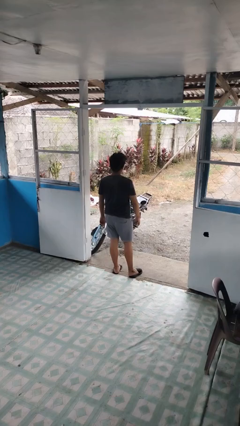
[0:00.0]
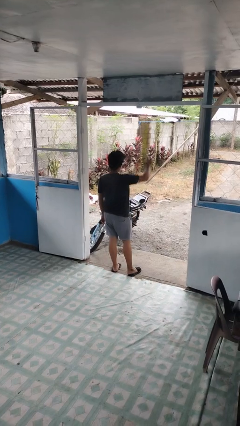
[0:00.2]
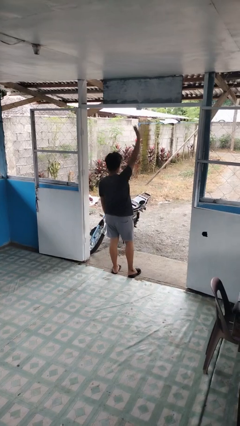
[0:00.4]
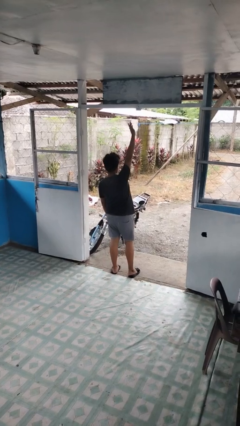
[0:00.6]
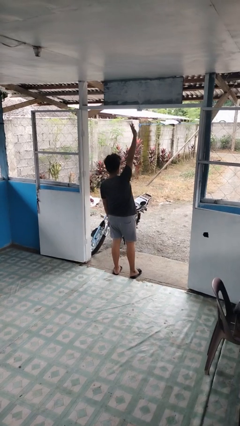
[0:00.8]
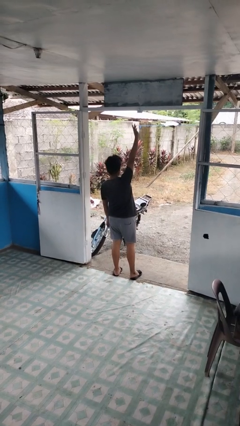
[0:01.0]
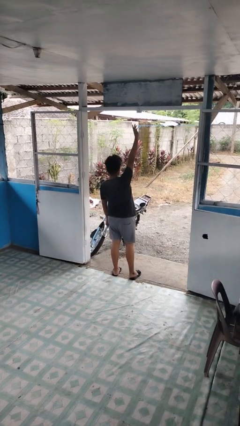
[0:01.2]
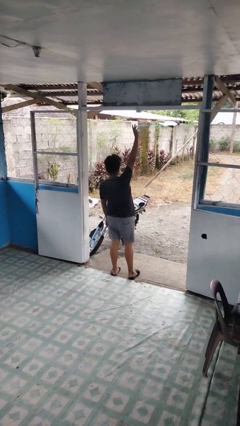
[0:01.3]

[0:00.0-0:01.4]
person gestures raise hand

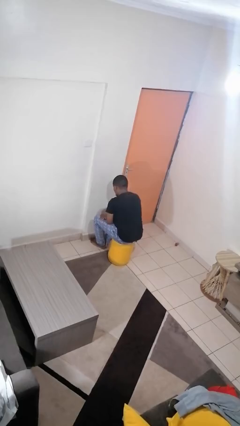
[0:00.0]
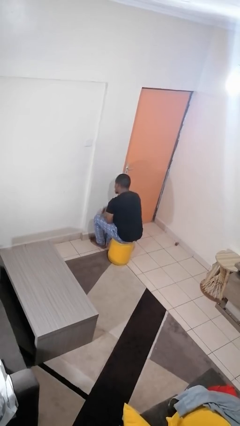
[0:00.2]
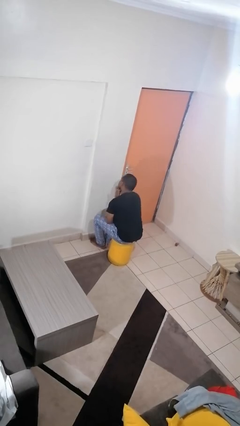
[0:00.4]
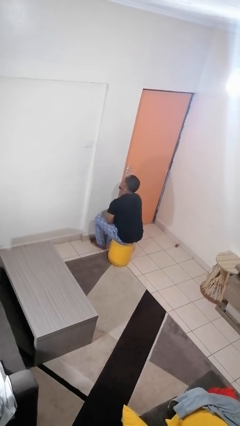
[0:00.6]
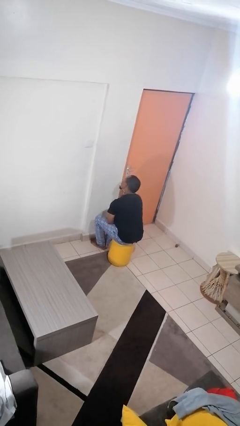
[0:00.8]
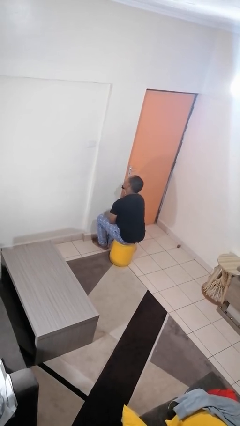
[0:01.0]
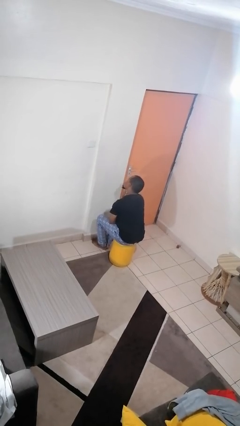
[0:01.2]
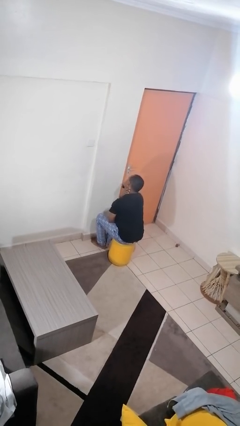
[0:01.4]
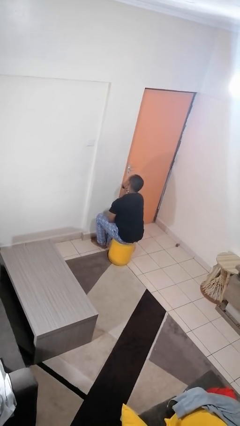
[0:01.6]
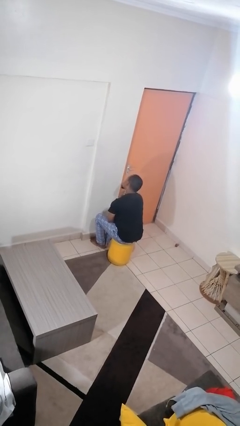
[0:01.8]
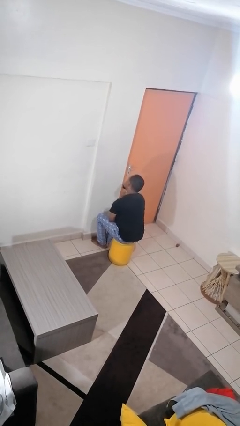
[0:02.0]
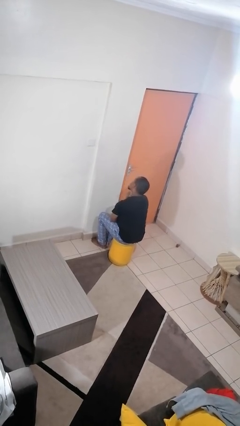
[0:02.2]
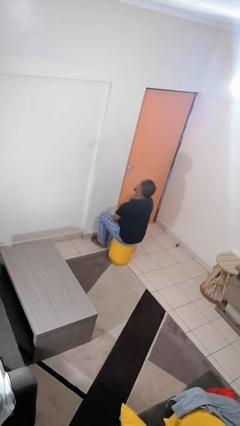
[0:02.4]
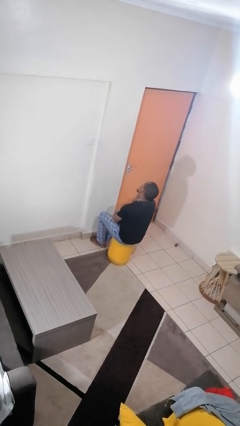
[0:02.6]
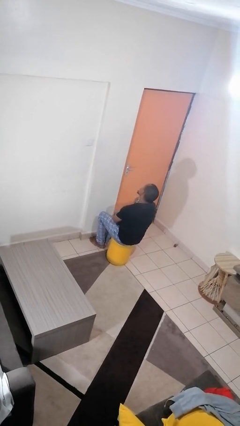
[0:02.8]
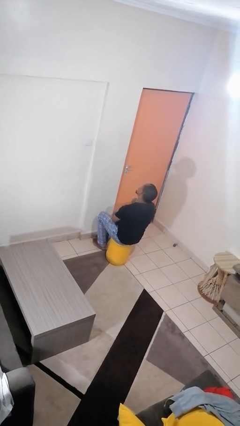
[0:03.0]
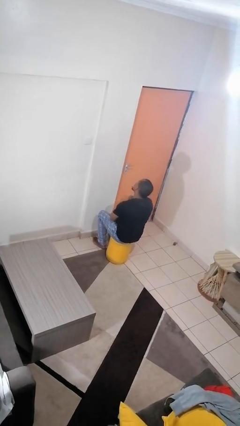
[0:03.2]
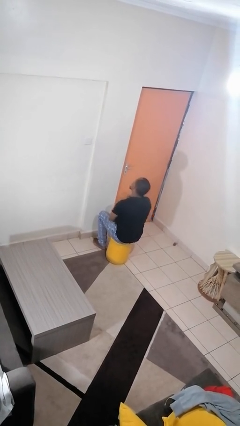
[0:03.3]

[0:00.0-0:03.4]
person rubs neck

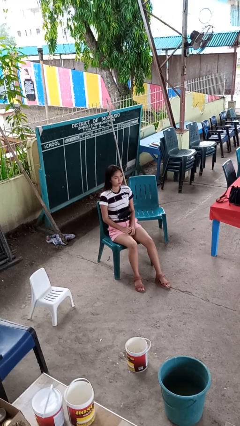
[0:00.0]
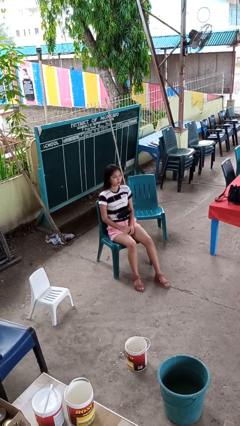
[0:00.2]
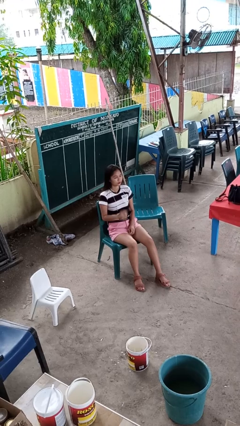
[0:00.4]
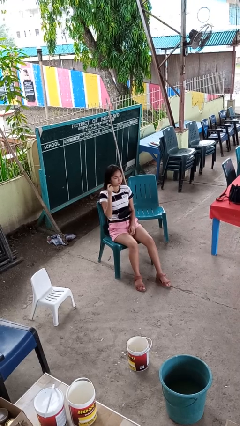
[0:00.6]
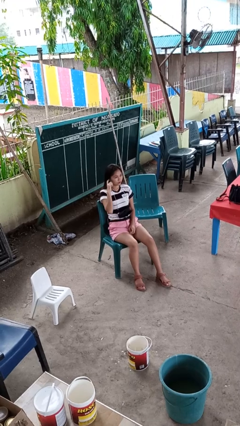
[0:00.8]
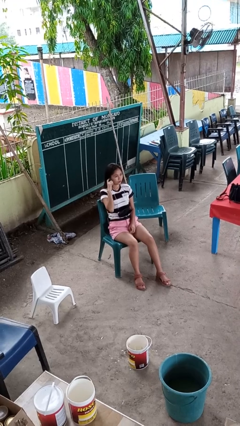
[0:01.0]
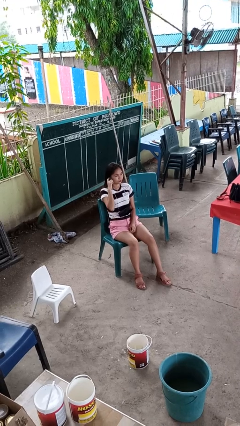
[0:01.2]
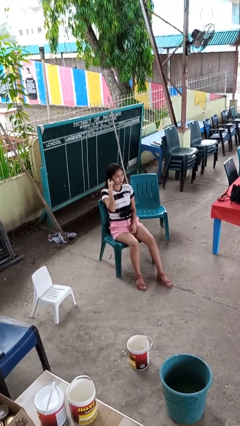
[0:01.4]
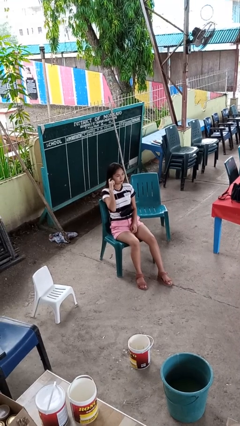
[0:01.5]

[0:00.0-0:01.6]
person gestures listen closely

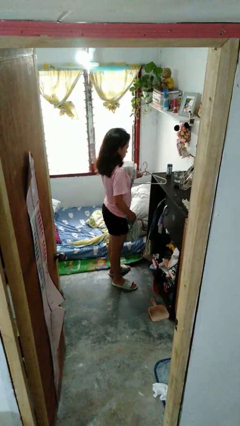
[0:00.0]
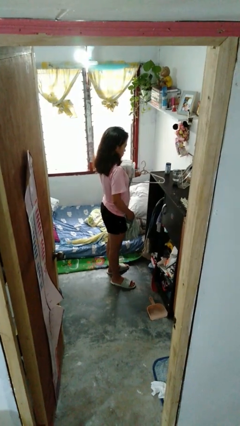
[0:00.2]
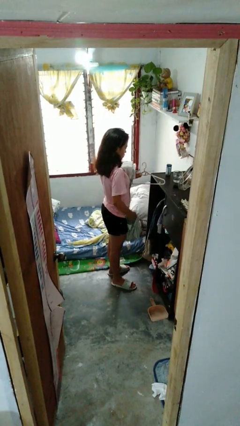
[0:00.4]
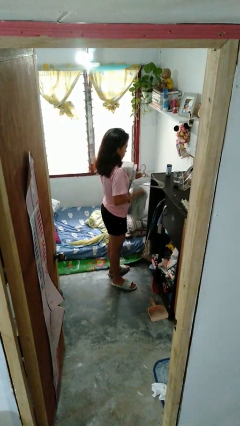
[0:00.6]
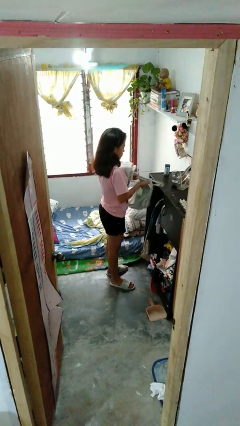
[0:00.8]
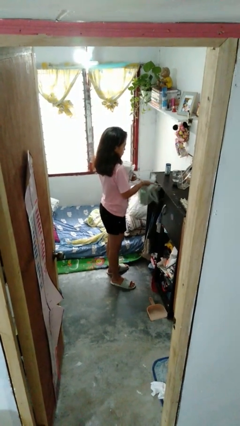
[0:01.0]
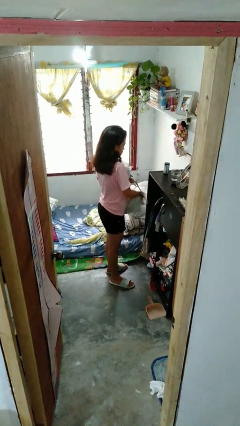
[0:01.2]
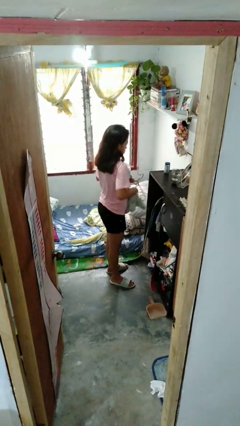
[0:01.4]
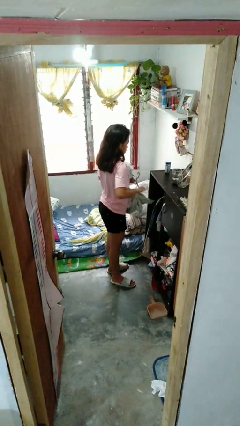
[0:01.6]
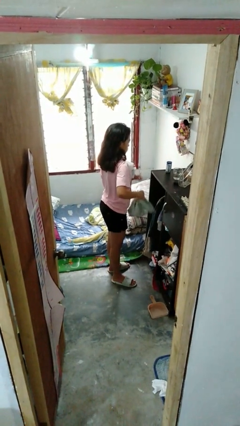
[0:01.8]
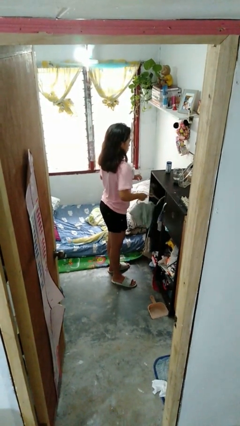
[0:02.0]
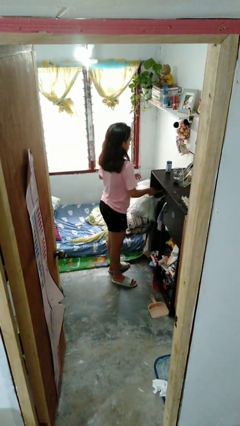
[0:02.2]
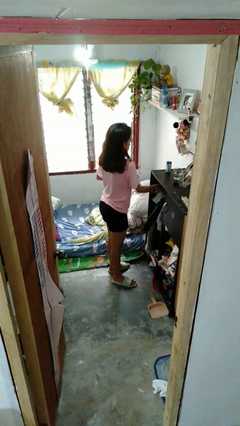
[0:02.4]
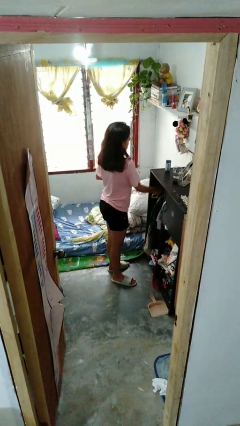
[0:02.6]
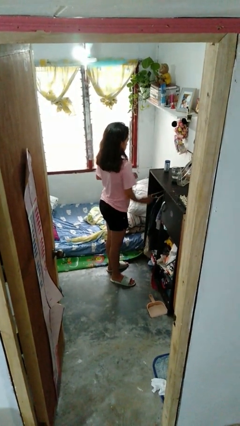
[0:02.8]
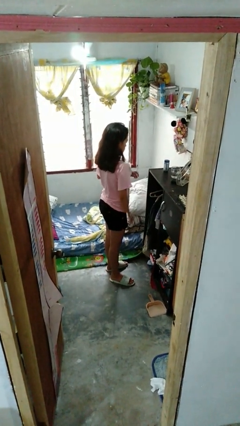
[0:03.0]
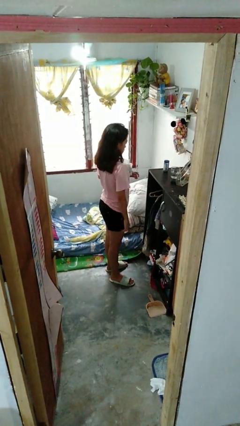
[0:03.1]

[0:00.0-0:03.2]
person puts clothes into closet

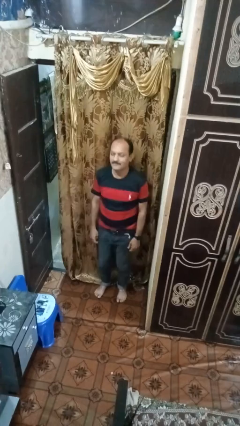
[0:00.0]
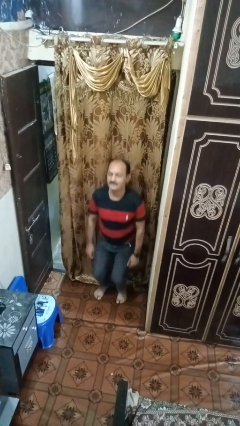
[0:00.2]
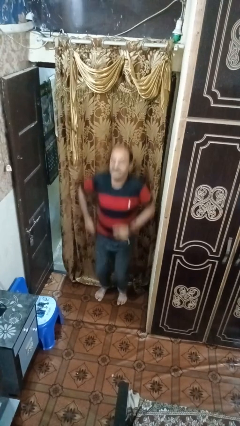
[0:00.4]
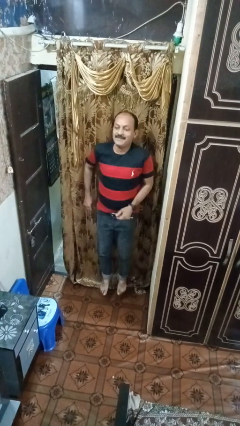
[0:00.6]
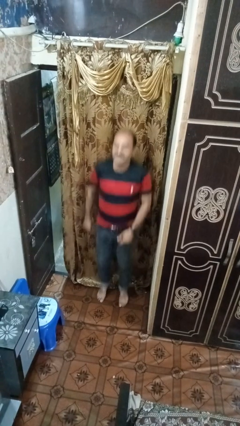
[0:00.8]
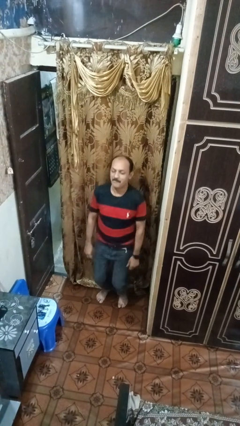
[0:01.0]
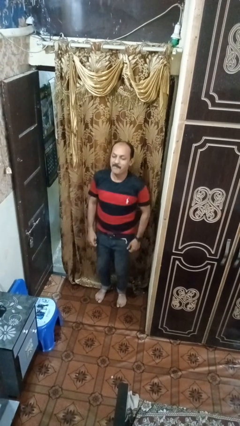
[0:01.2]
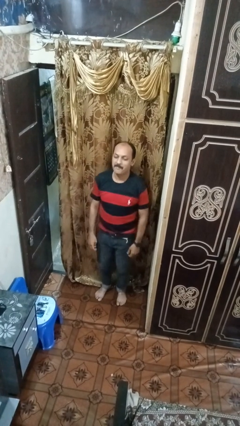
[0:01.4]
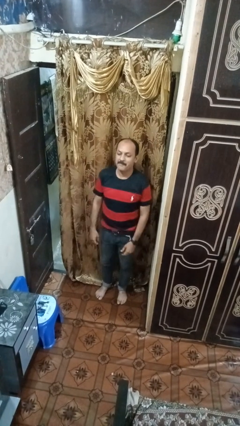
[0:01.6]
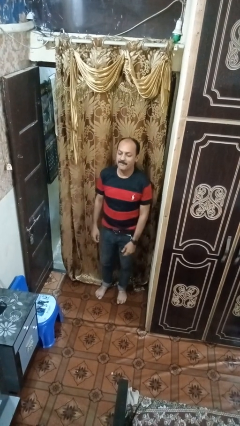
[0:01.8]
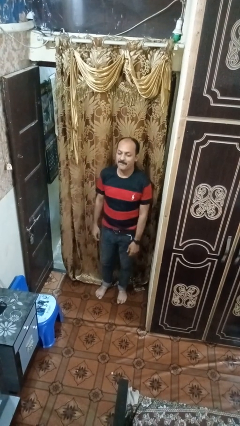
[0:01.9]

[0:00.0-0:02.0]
person jumps

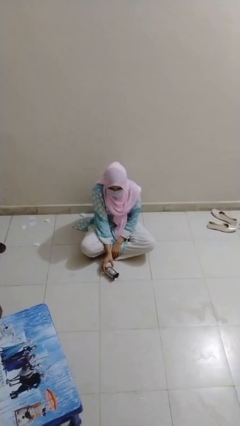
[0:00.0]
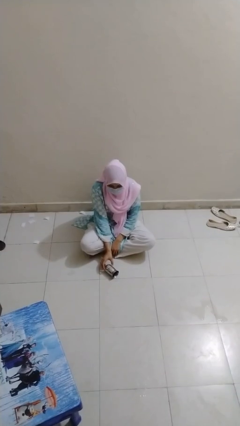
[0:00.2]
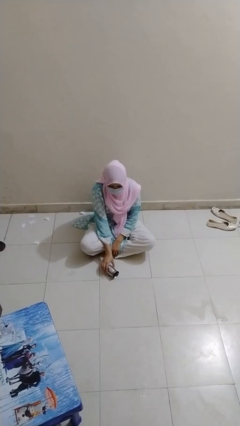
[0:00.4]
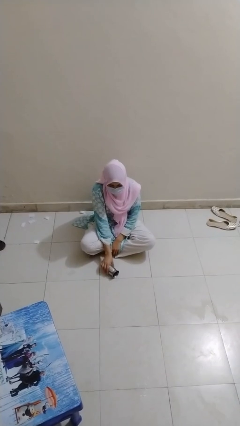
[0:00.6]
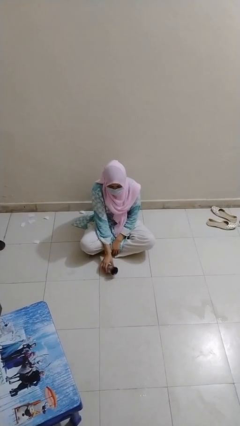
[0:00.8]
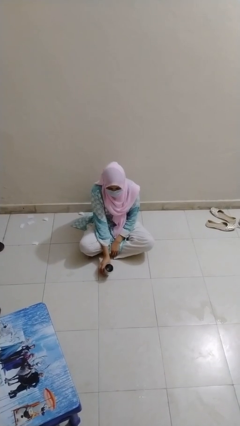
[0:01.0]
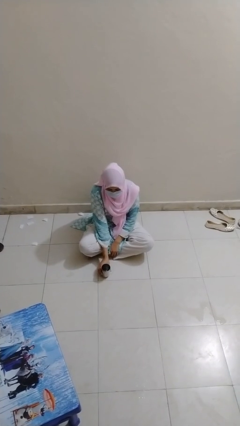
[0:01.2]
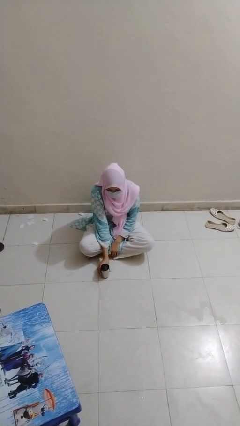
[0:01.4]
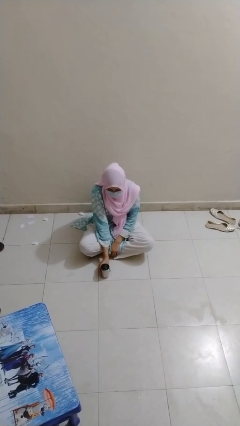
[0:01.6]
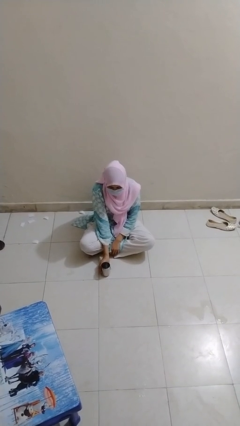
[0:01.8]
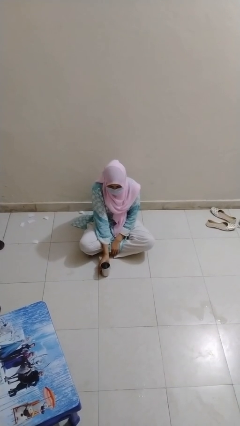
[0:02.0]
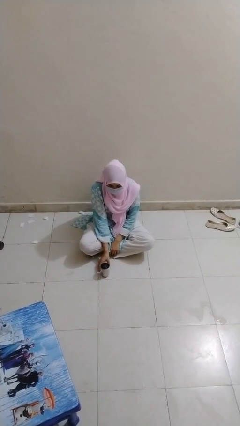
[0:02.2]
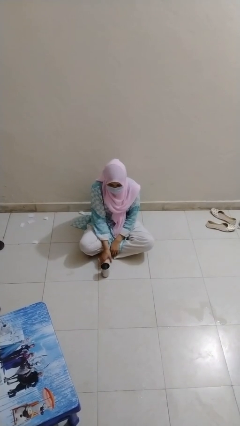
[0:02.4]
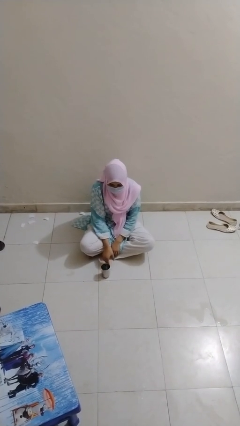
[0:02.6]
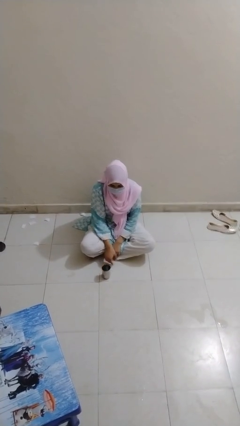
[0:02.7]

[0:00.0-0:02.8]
person sets upright glass

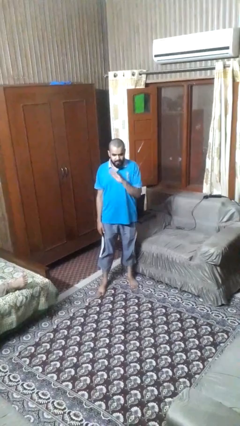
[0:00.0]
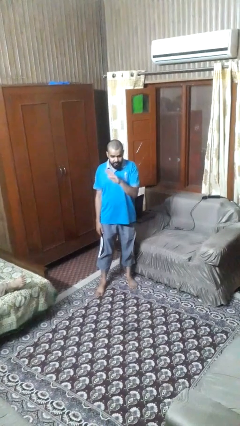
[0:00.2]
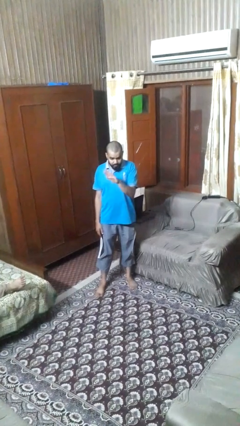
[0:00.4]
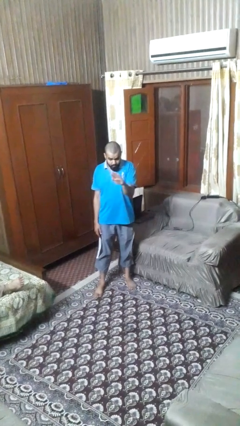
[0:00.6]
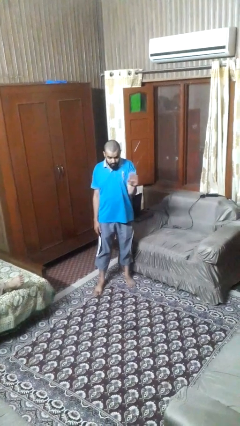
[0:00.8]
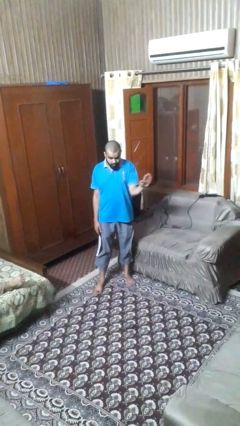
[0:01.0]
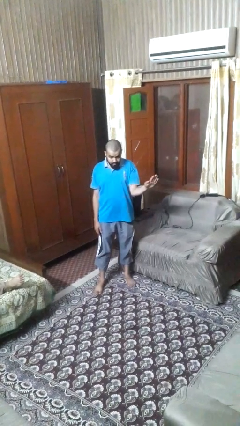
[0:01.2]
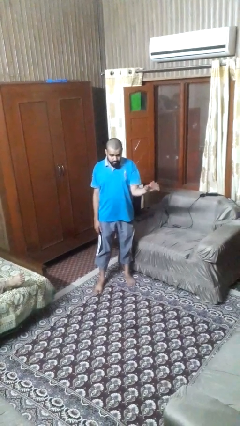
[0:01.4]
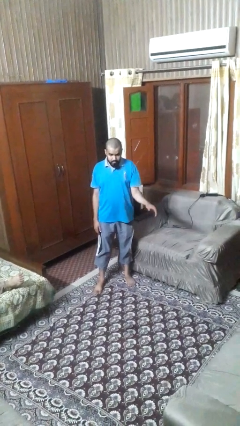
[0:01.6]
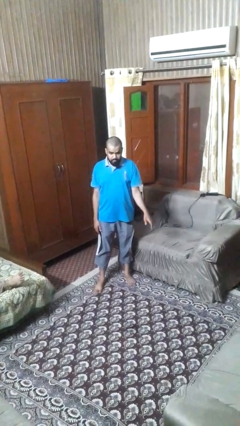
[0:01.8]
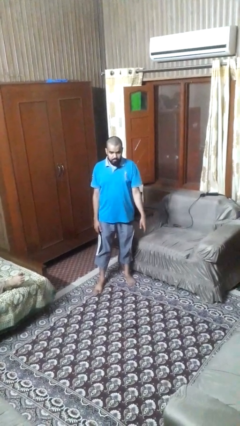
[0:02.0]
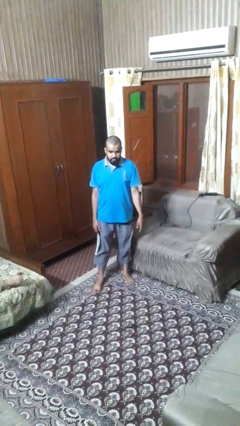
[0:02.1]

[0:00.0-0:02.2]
person gestures swipe right

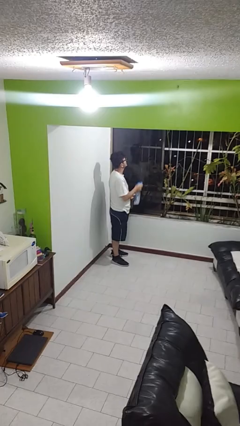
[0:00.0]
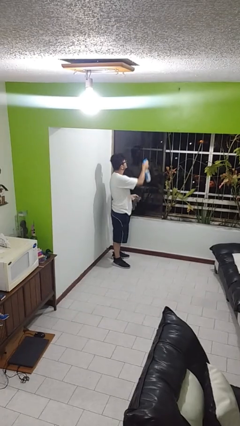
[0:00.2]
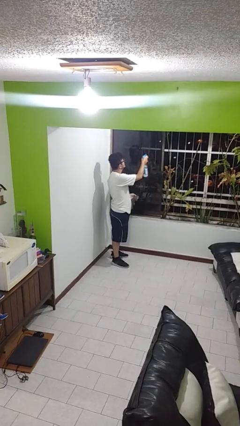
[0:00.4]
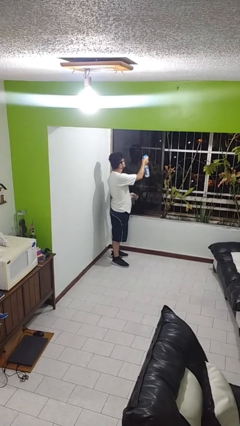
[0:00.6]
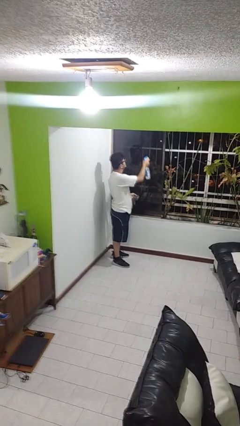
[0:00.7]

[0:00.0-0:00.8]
person sprays from bottle
